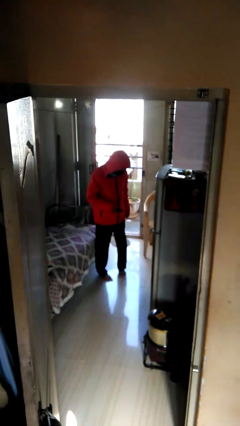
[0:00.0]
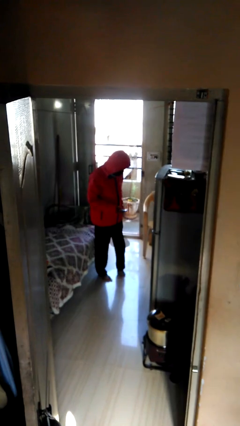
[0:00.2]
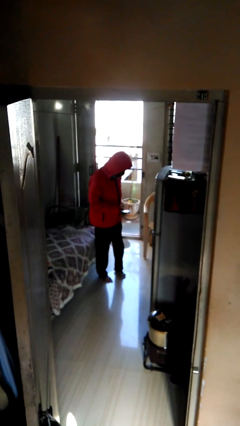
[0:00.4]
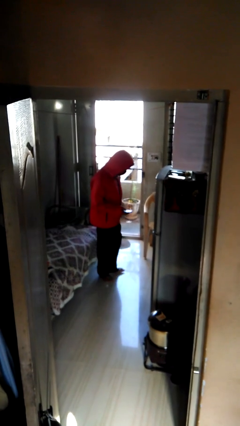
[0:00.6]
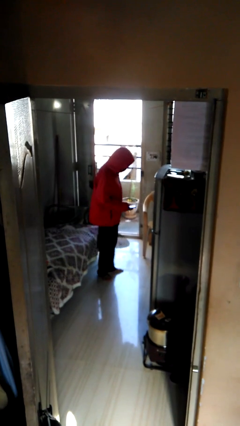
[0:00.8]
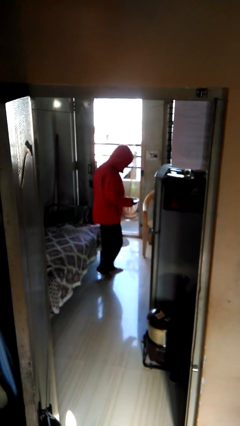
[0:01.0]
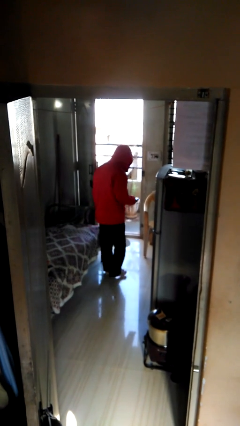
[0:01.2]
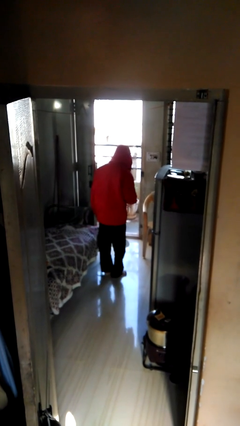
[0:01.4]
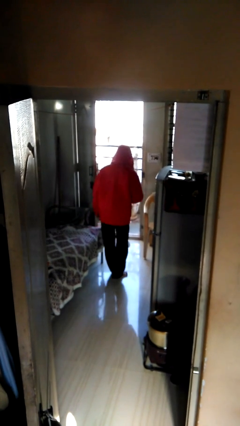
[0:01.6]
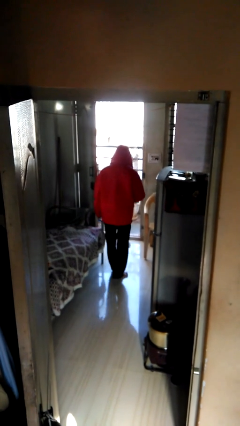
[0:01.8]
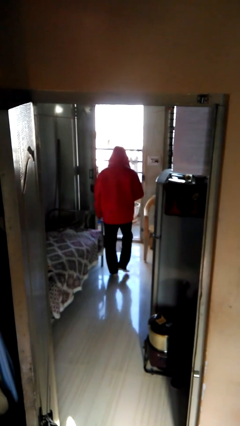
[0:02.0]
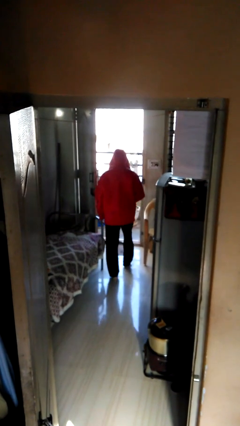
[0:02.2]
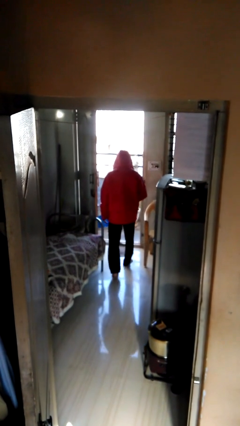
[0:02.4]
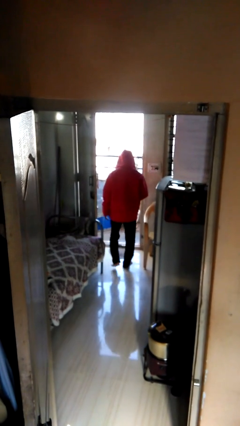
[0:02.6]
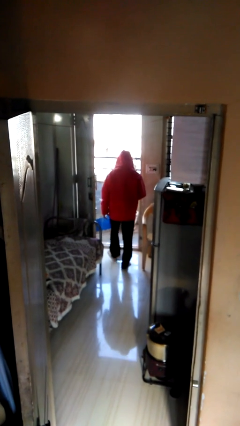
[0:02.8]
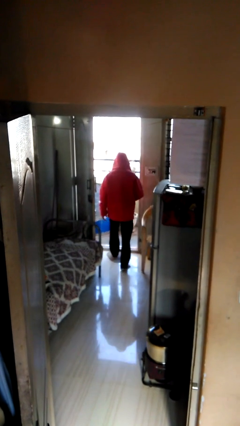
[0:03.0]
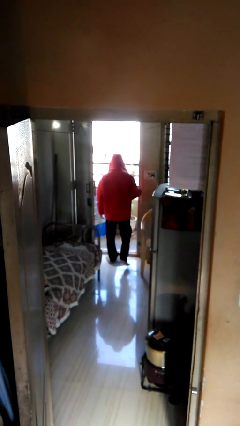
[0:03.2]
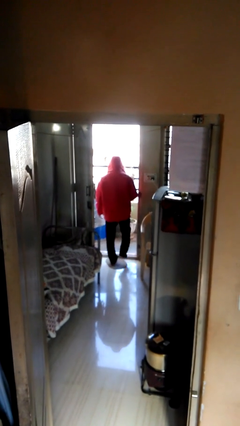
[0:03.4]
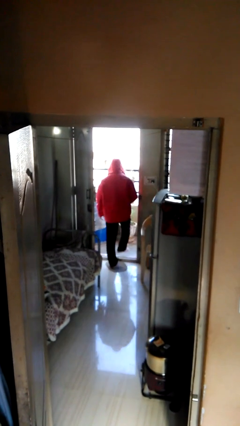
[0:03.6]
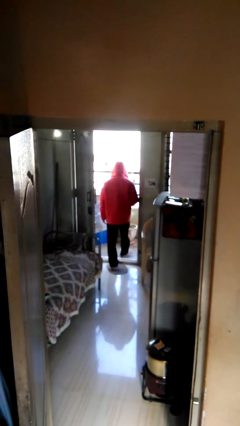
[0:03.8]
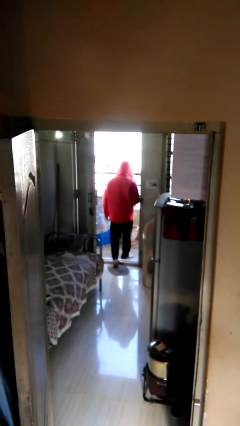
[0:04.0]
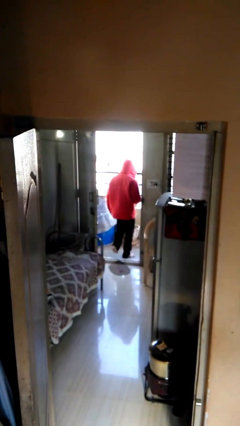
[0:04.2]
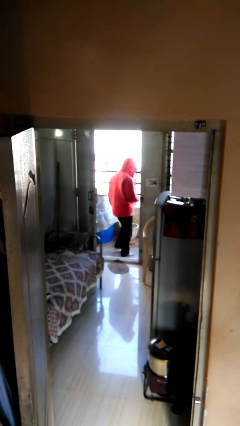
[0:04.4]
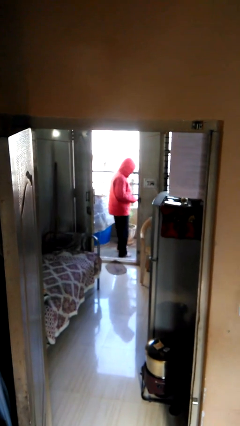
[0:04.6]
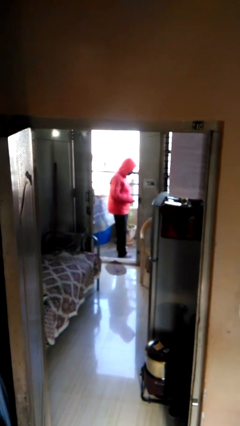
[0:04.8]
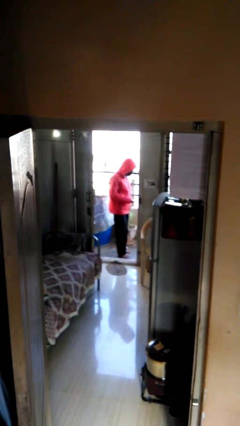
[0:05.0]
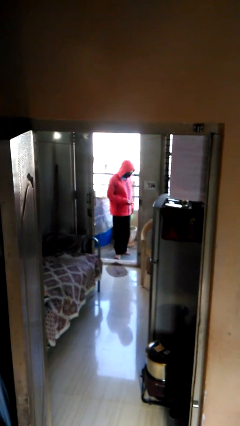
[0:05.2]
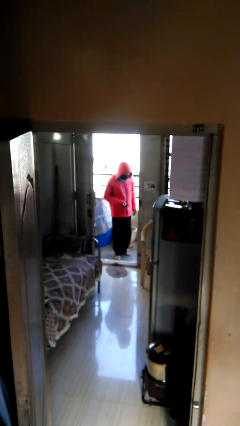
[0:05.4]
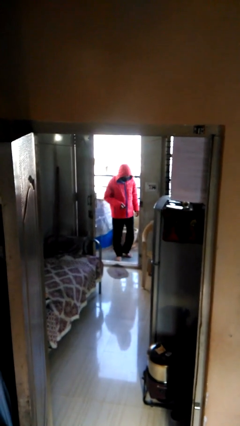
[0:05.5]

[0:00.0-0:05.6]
person exits scene through structure

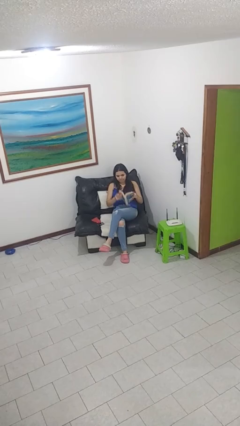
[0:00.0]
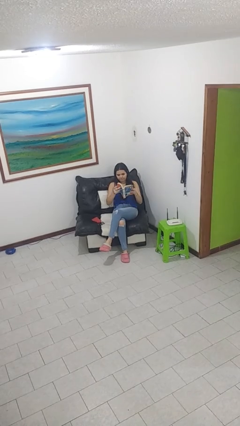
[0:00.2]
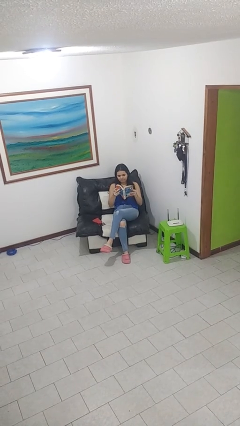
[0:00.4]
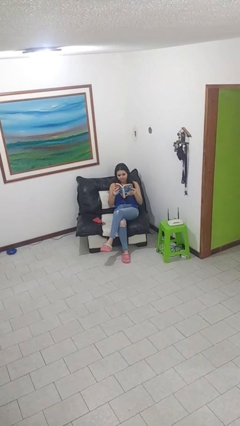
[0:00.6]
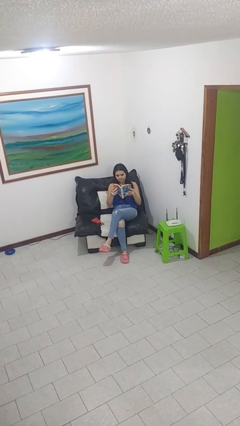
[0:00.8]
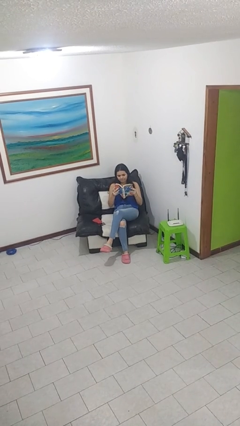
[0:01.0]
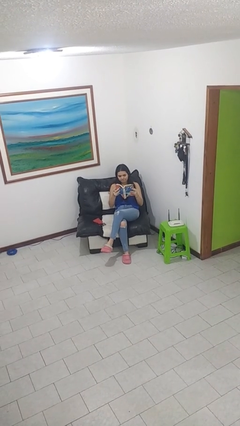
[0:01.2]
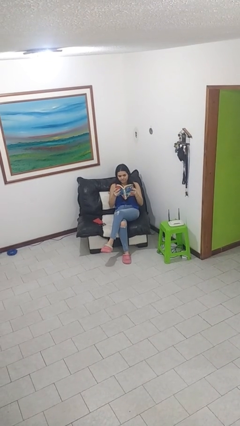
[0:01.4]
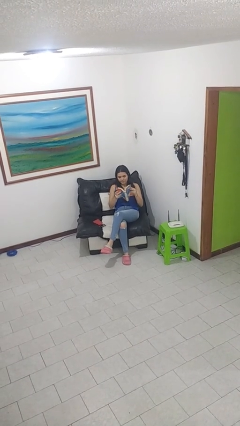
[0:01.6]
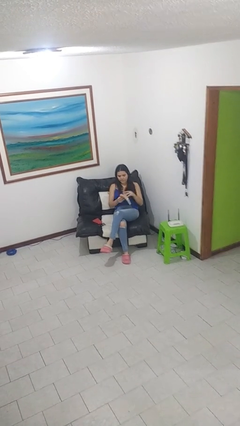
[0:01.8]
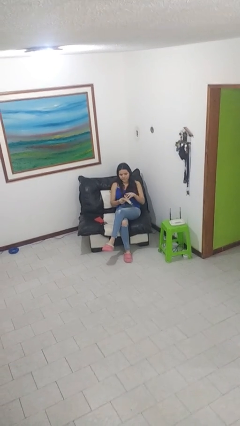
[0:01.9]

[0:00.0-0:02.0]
person reads book

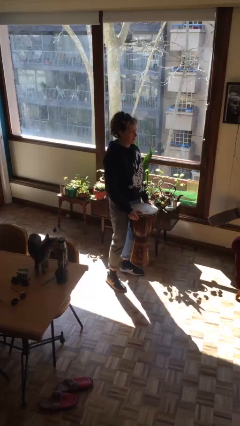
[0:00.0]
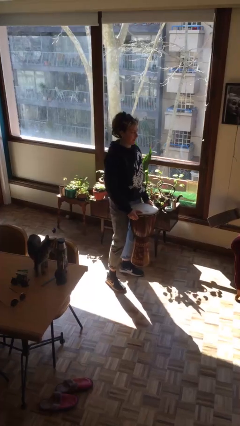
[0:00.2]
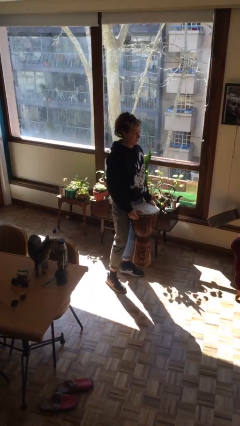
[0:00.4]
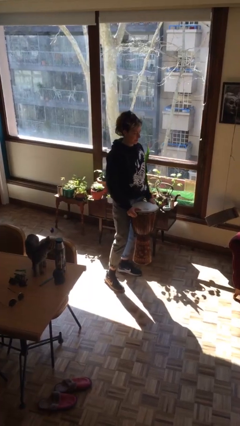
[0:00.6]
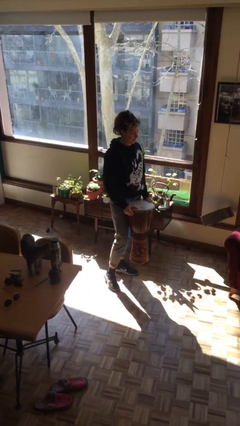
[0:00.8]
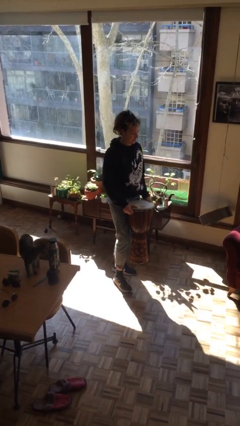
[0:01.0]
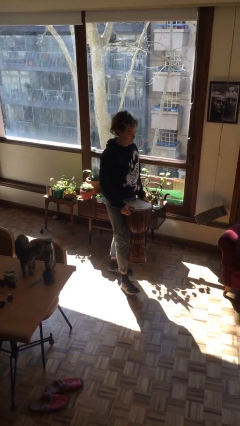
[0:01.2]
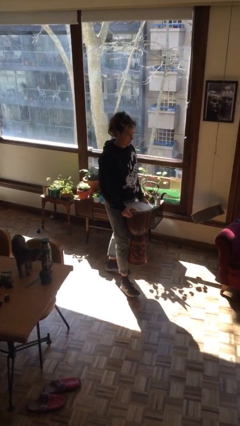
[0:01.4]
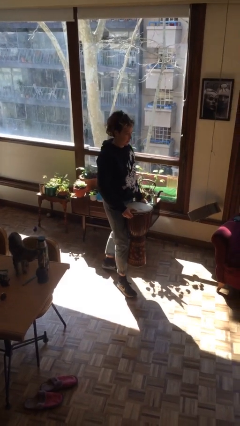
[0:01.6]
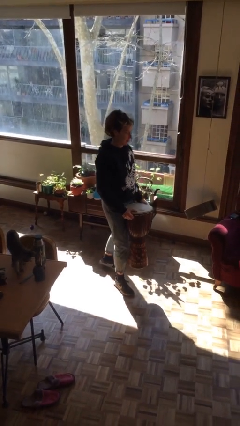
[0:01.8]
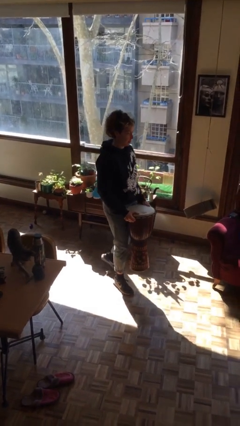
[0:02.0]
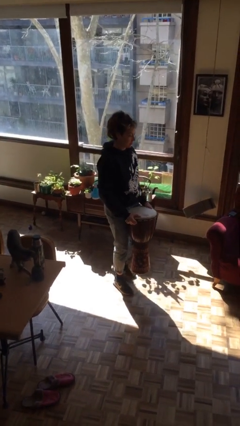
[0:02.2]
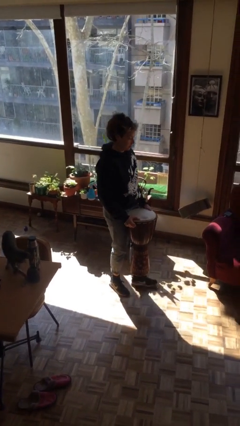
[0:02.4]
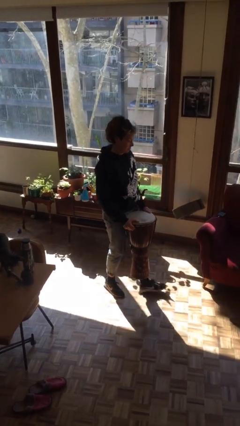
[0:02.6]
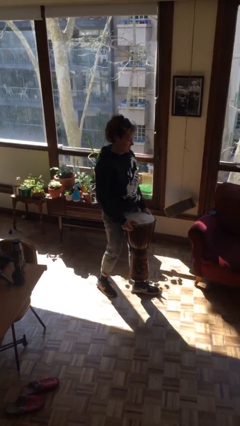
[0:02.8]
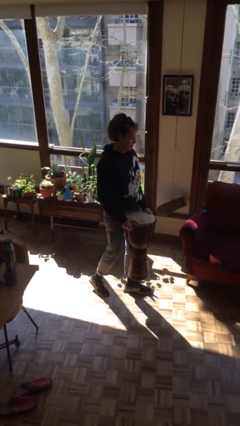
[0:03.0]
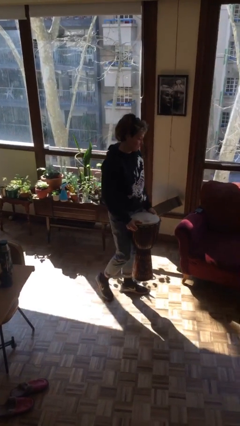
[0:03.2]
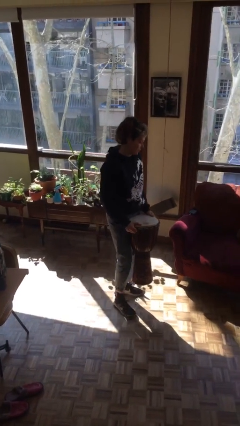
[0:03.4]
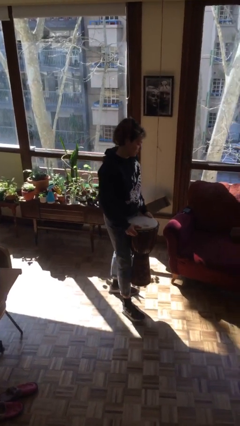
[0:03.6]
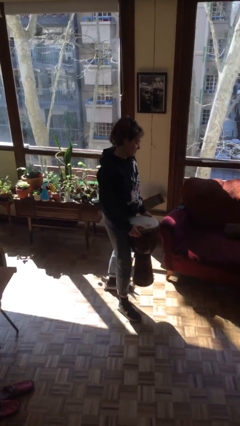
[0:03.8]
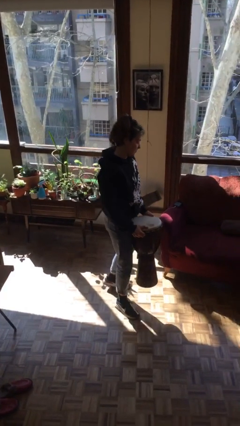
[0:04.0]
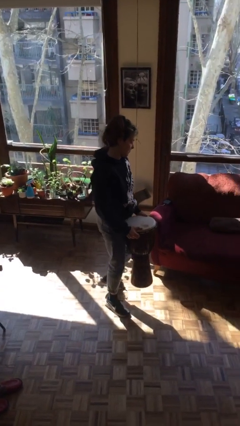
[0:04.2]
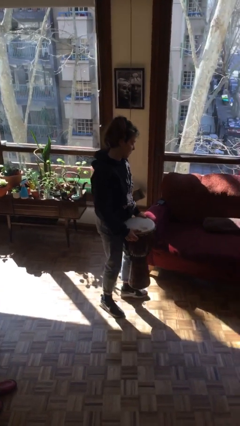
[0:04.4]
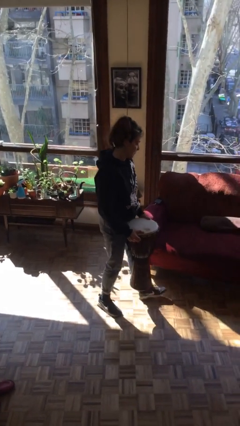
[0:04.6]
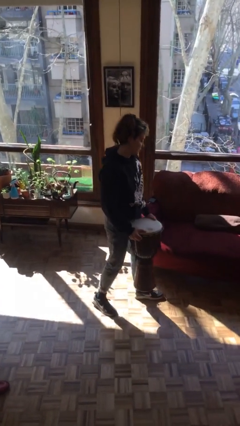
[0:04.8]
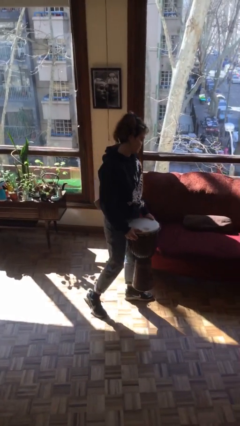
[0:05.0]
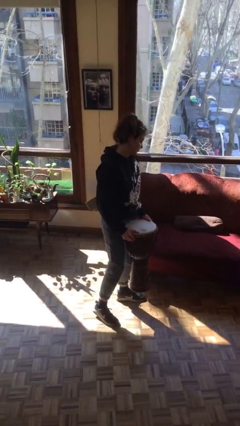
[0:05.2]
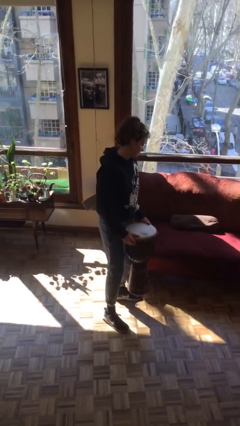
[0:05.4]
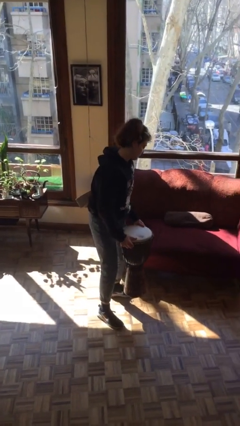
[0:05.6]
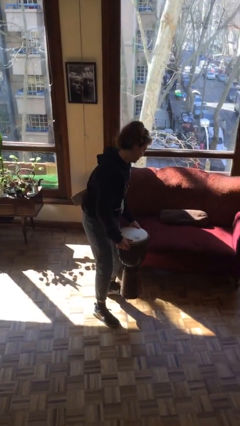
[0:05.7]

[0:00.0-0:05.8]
person carries heavy object

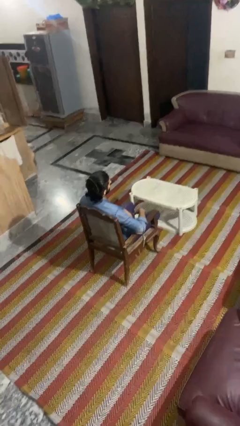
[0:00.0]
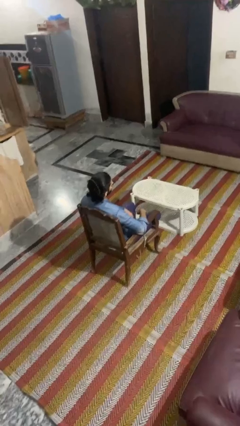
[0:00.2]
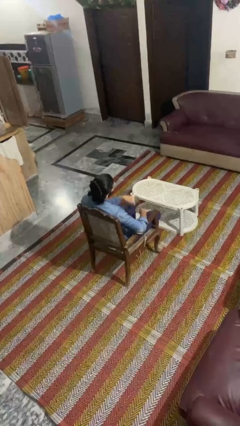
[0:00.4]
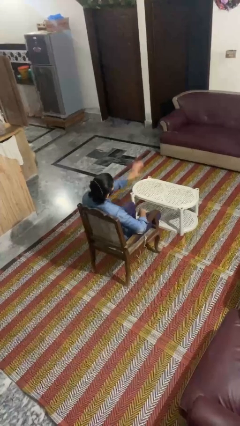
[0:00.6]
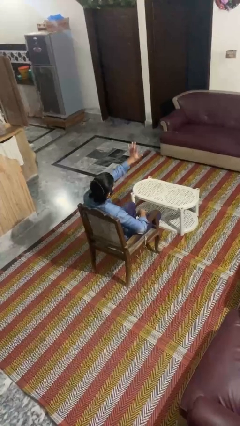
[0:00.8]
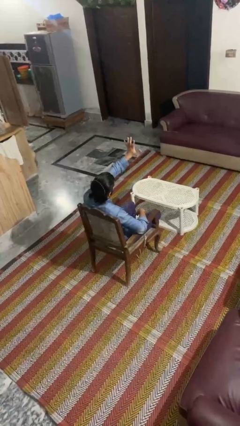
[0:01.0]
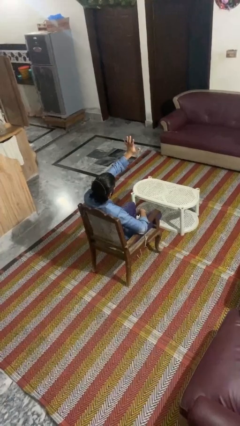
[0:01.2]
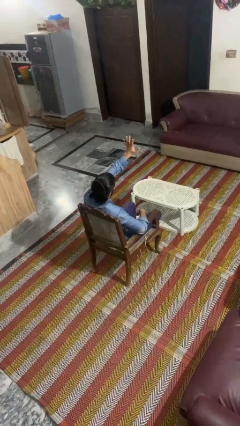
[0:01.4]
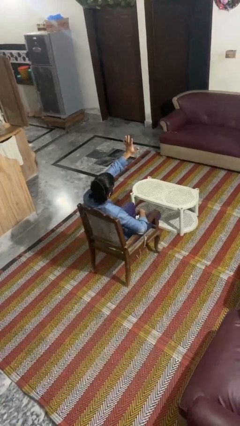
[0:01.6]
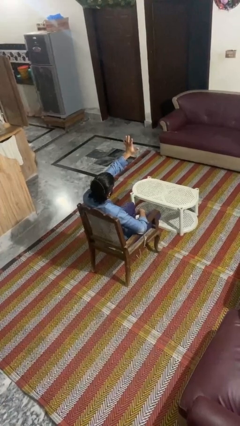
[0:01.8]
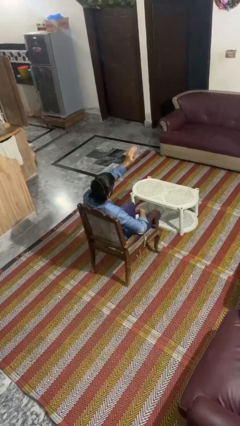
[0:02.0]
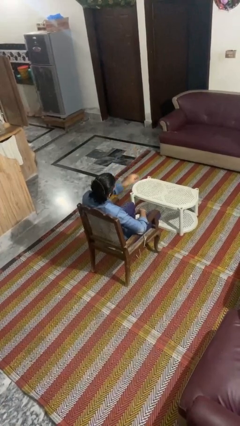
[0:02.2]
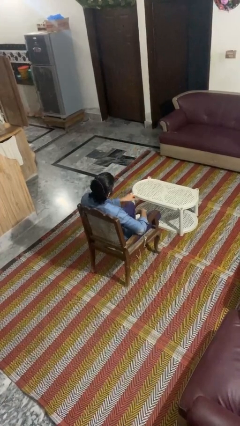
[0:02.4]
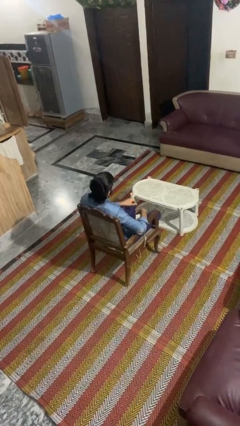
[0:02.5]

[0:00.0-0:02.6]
person gestures number five

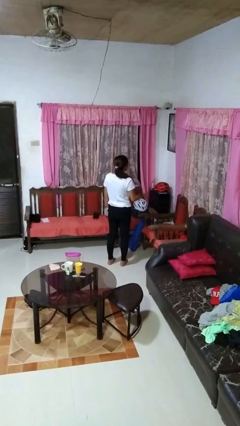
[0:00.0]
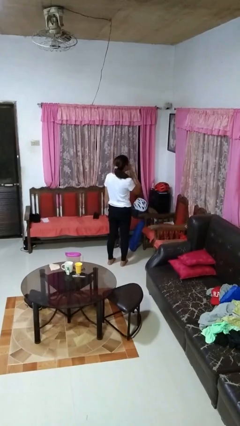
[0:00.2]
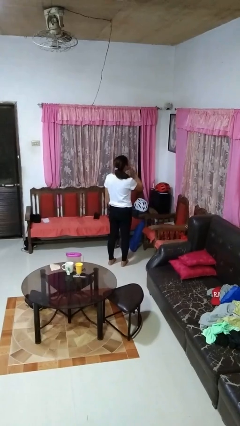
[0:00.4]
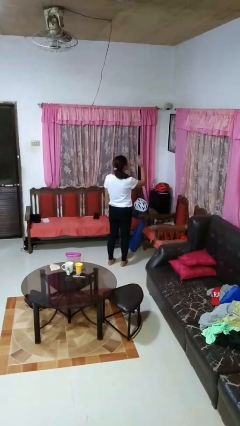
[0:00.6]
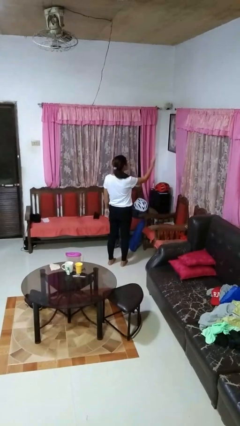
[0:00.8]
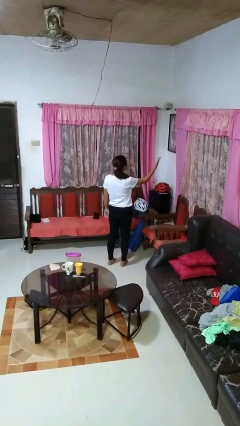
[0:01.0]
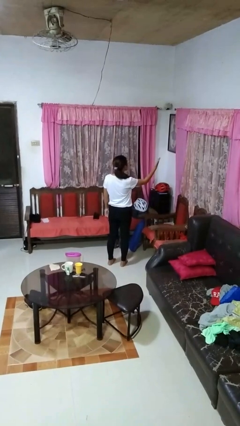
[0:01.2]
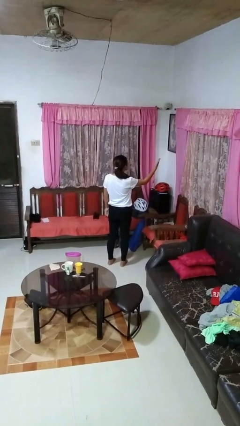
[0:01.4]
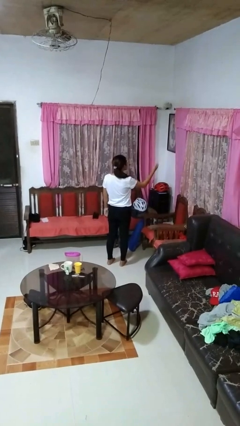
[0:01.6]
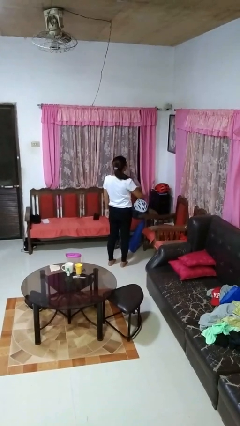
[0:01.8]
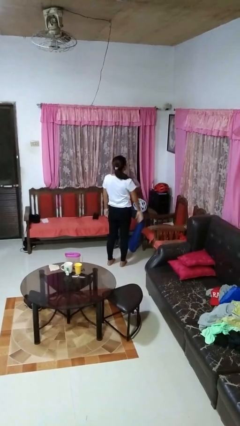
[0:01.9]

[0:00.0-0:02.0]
person gestures blow kiss
